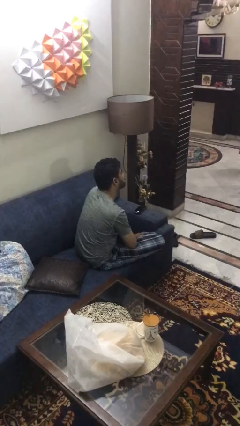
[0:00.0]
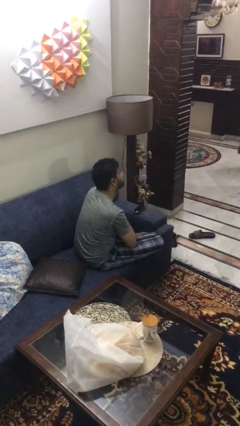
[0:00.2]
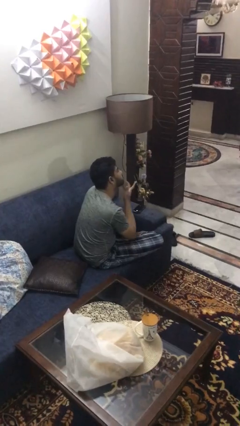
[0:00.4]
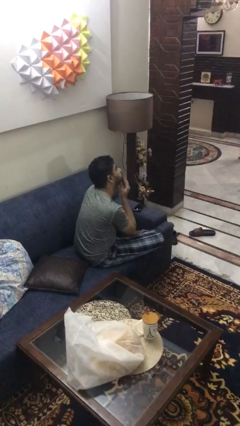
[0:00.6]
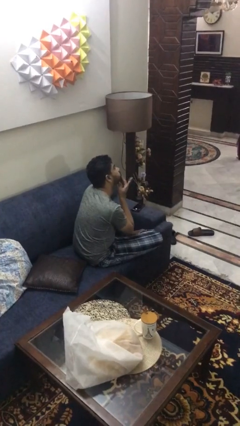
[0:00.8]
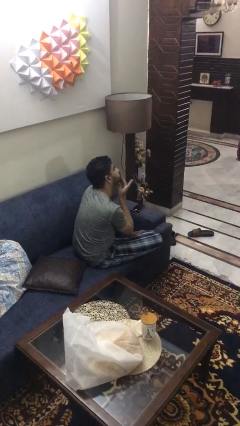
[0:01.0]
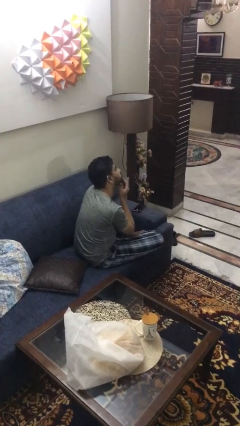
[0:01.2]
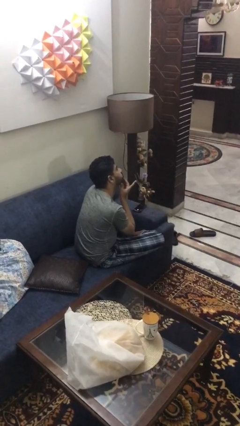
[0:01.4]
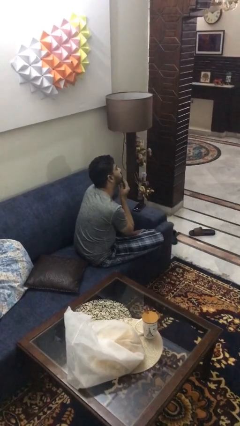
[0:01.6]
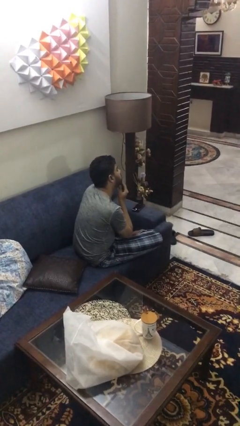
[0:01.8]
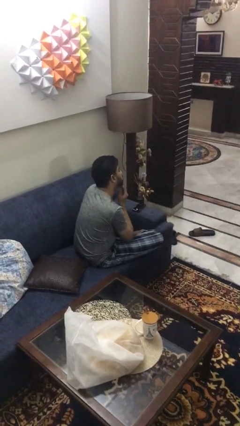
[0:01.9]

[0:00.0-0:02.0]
person strokes chin

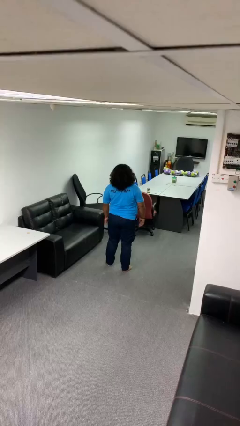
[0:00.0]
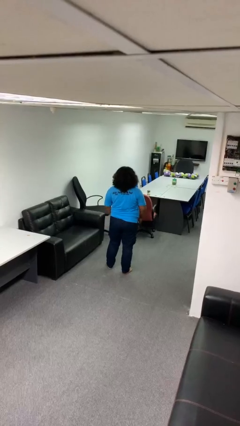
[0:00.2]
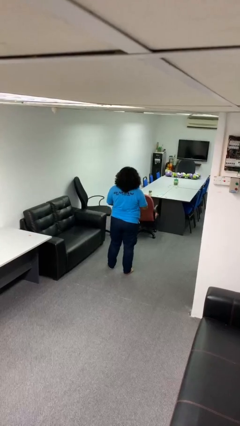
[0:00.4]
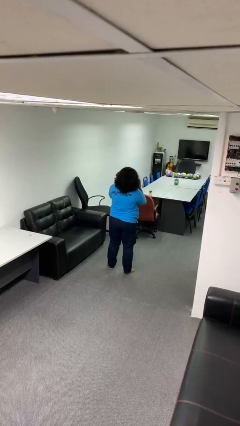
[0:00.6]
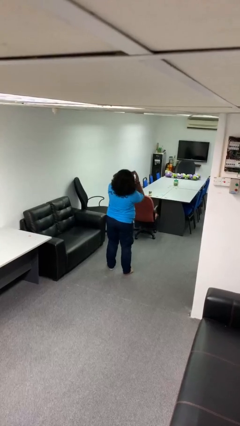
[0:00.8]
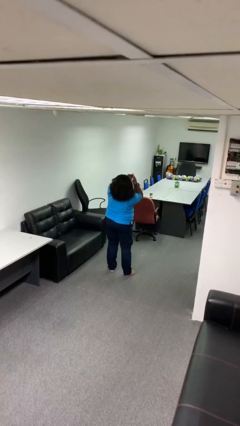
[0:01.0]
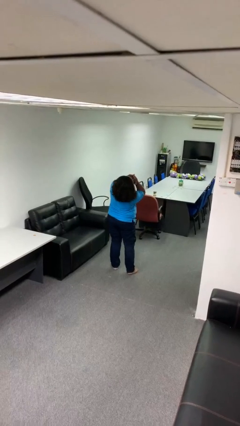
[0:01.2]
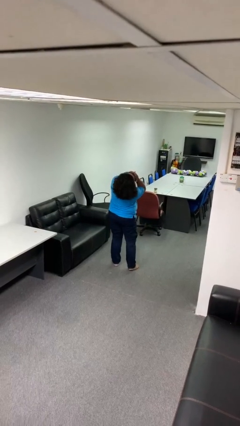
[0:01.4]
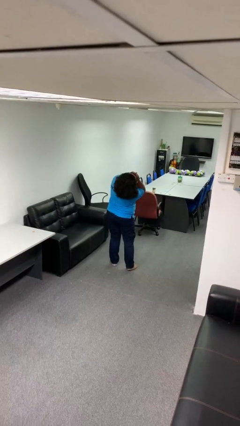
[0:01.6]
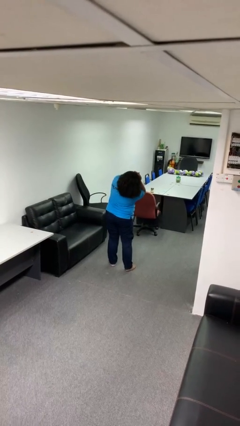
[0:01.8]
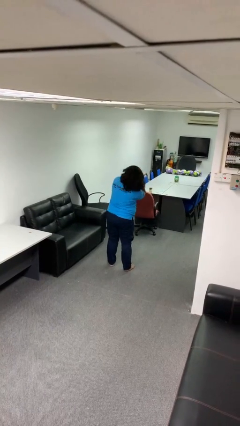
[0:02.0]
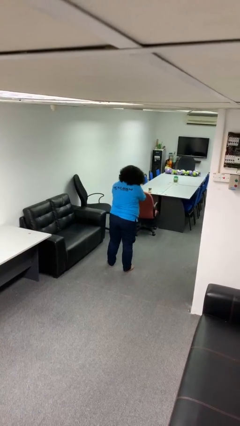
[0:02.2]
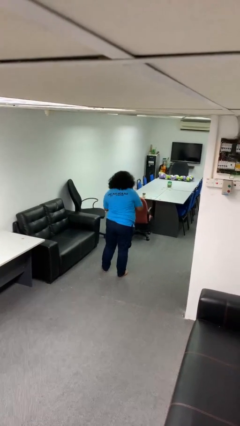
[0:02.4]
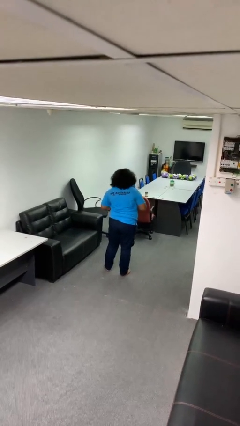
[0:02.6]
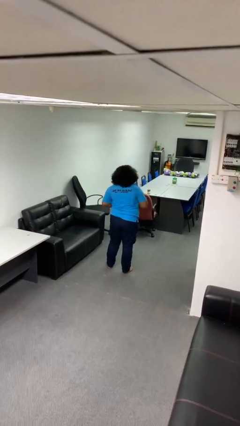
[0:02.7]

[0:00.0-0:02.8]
person covers face with hands

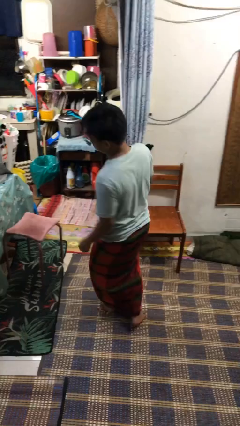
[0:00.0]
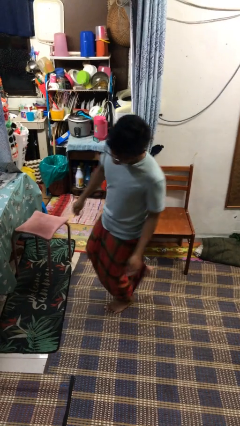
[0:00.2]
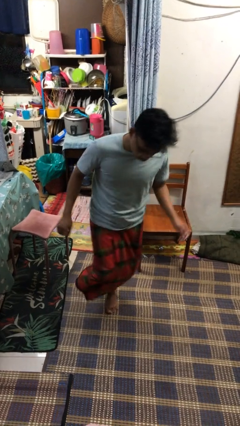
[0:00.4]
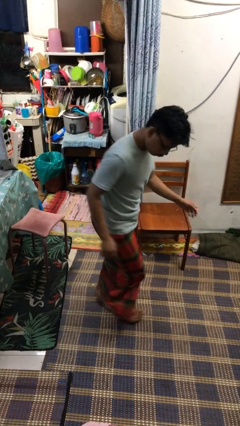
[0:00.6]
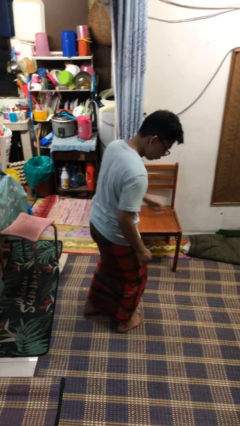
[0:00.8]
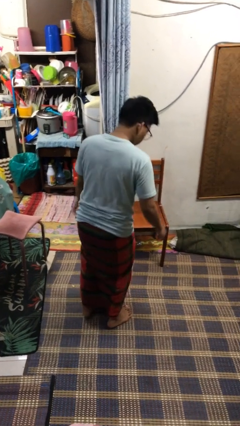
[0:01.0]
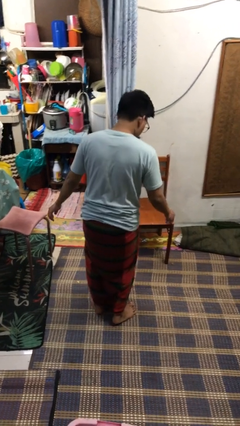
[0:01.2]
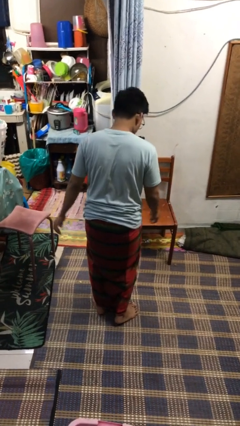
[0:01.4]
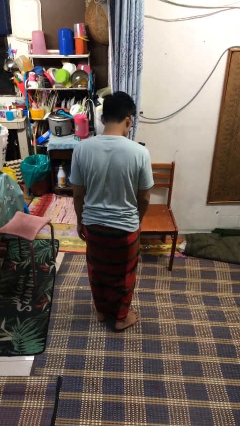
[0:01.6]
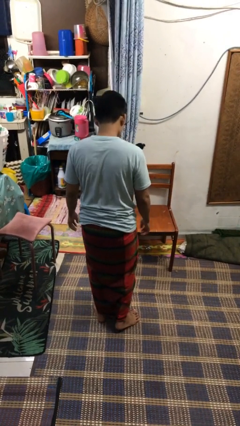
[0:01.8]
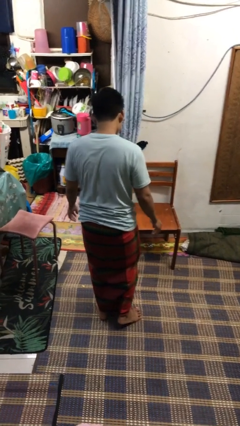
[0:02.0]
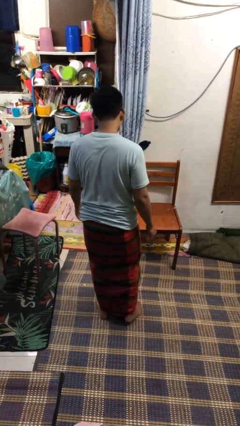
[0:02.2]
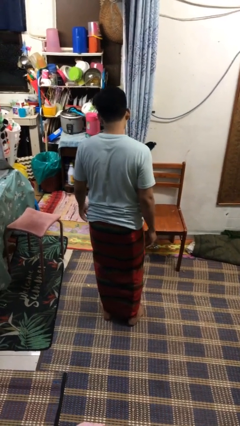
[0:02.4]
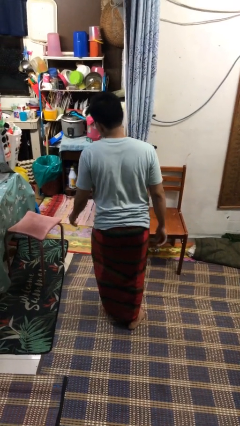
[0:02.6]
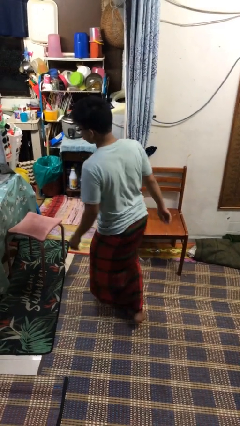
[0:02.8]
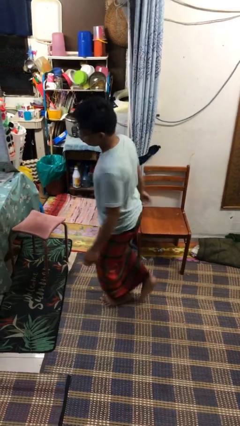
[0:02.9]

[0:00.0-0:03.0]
person twirls

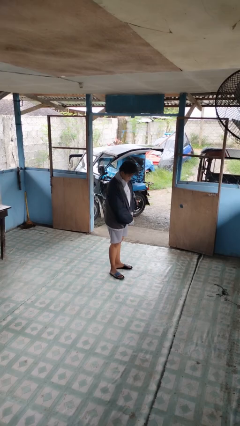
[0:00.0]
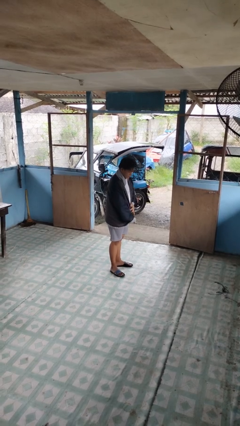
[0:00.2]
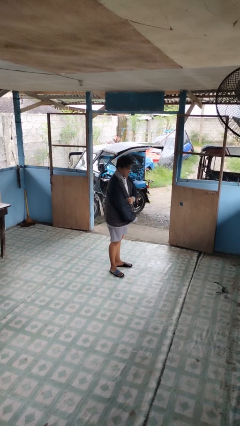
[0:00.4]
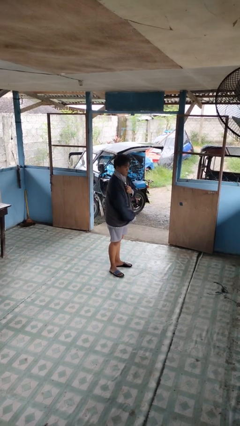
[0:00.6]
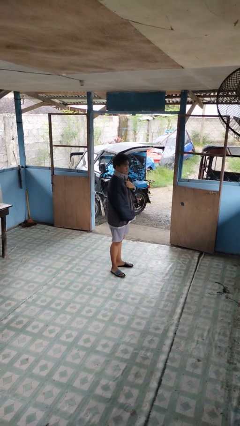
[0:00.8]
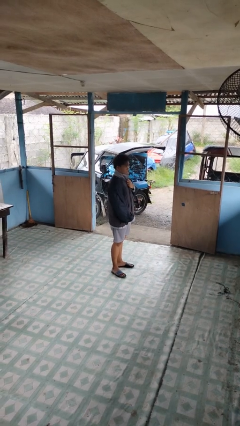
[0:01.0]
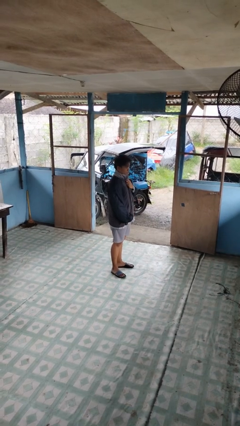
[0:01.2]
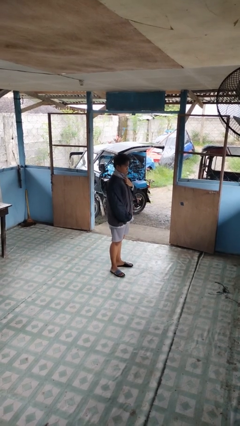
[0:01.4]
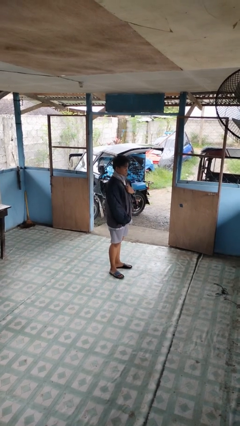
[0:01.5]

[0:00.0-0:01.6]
person zips up jacket

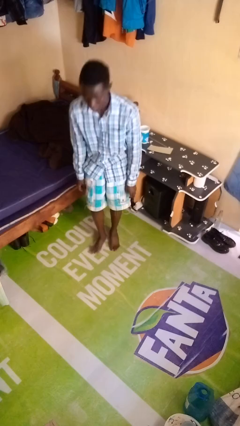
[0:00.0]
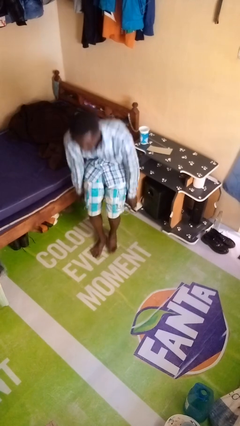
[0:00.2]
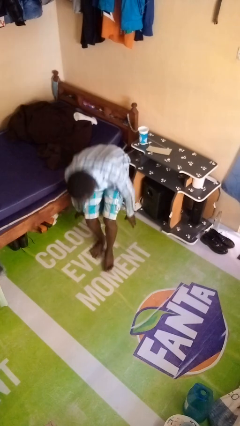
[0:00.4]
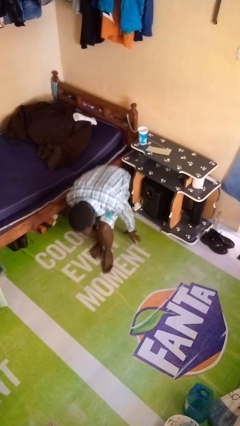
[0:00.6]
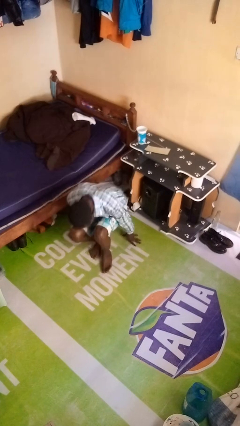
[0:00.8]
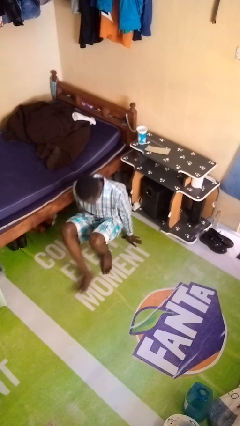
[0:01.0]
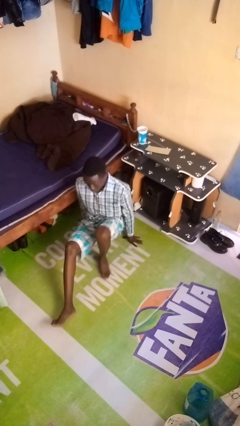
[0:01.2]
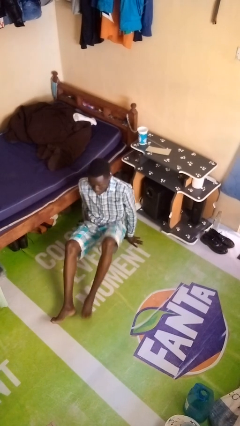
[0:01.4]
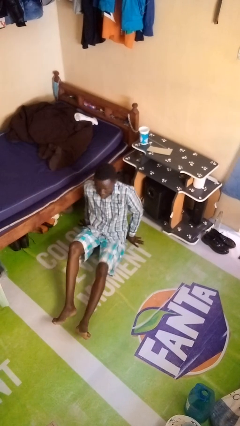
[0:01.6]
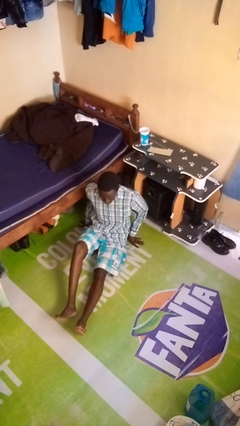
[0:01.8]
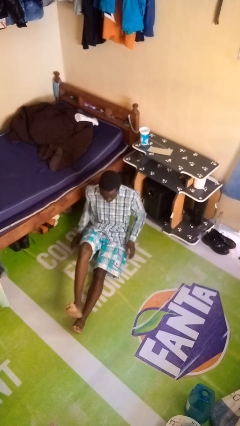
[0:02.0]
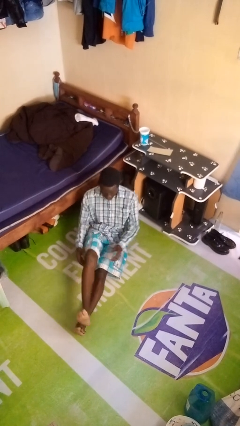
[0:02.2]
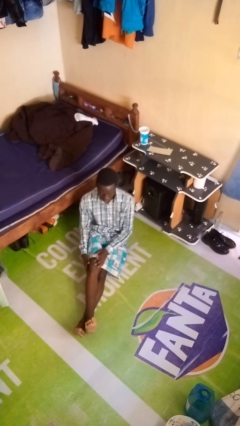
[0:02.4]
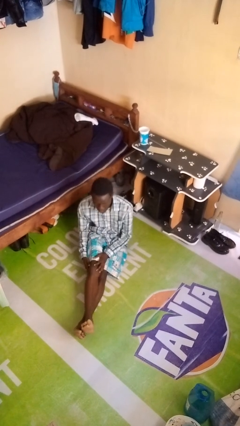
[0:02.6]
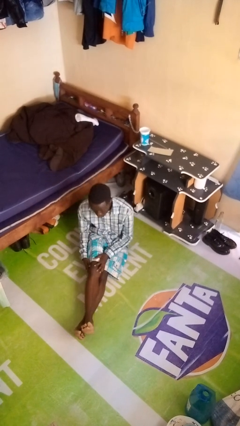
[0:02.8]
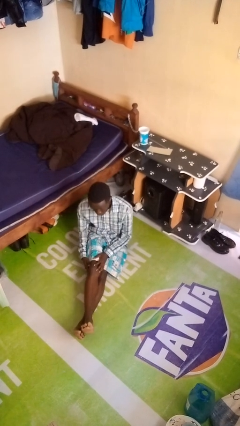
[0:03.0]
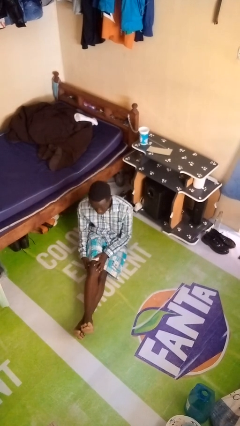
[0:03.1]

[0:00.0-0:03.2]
person sits crisscross

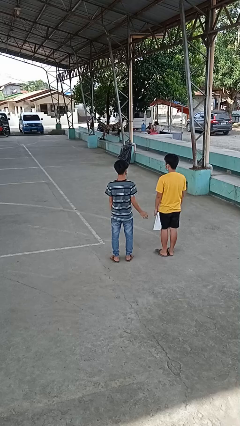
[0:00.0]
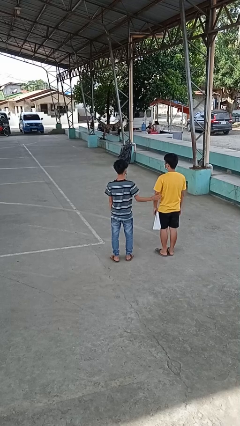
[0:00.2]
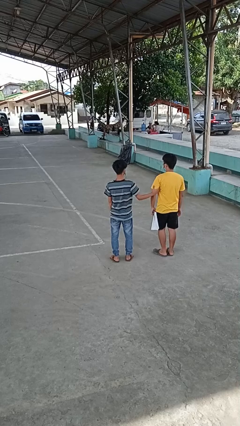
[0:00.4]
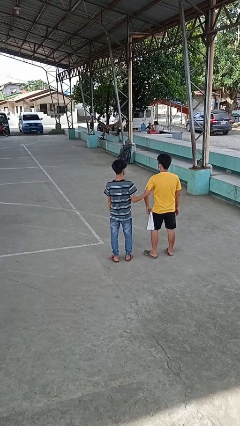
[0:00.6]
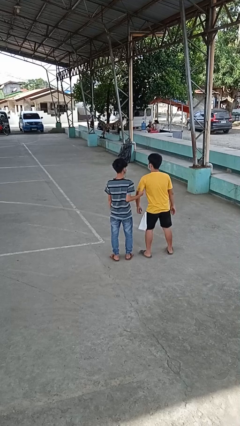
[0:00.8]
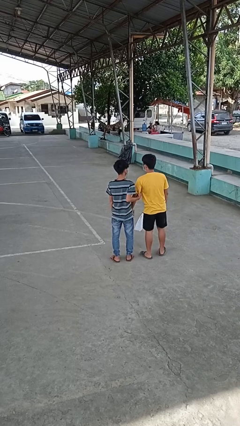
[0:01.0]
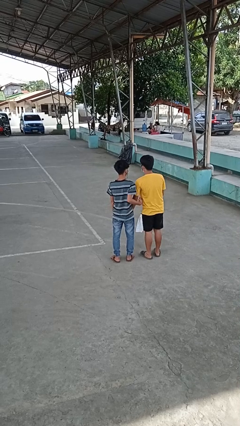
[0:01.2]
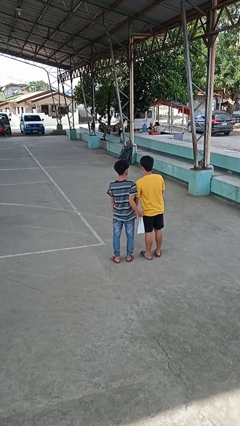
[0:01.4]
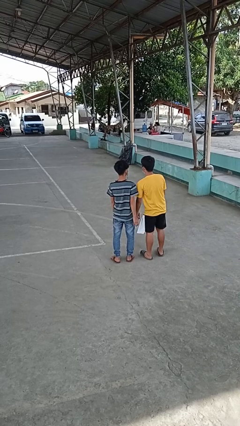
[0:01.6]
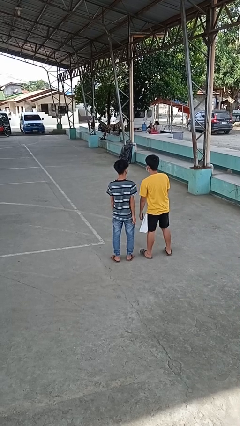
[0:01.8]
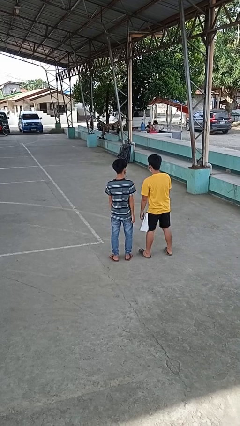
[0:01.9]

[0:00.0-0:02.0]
person grabs person by bicep

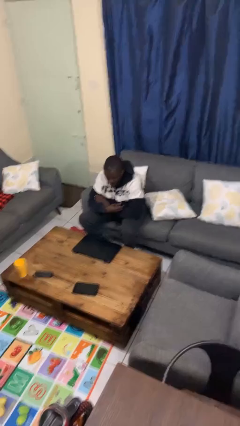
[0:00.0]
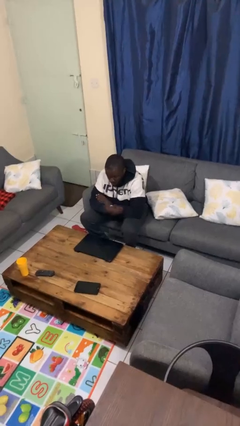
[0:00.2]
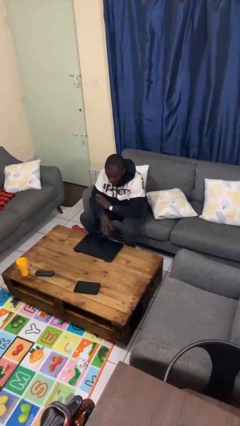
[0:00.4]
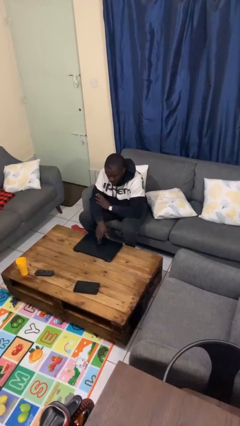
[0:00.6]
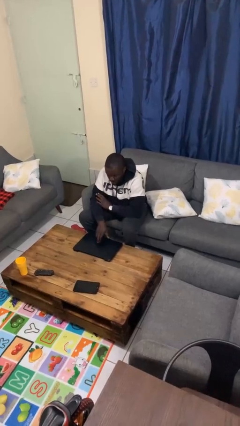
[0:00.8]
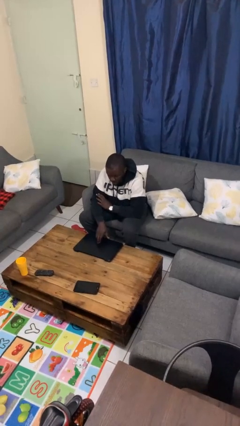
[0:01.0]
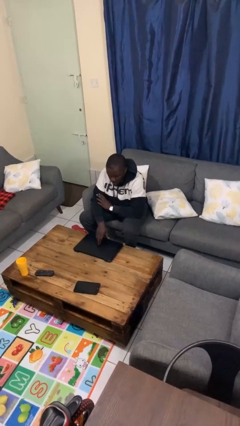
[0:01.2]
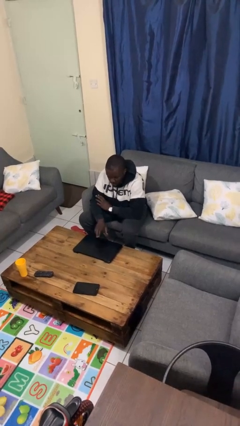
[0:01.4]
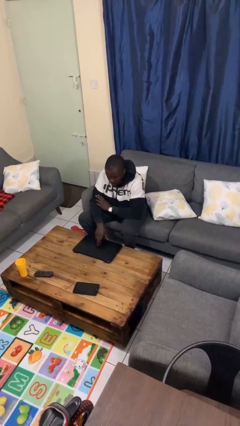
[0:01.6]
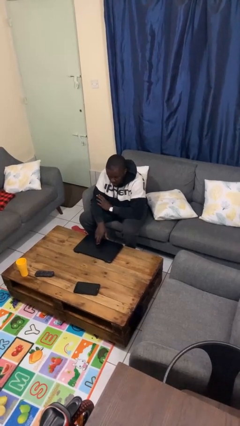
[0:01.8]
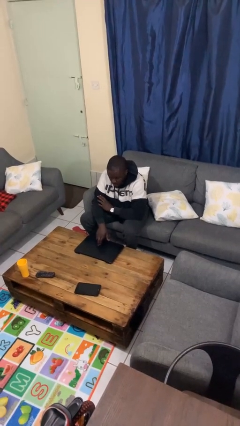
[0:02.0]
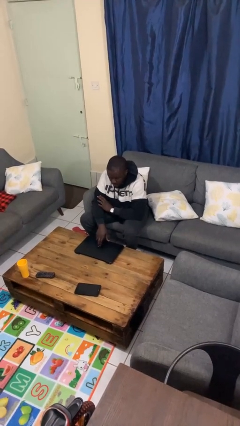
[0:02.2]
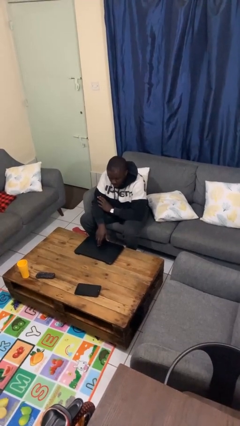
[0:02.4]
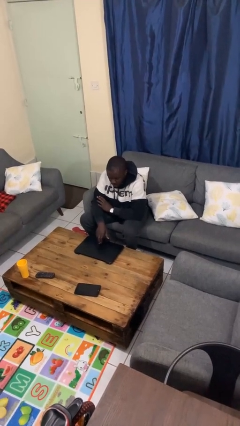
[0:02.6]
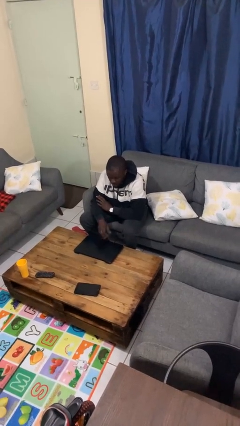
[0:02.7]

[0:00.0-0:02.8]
person taps object with finger
